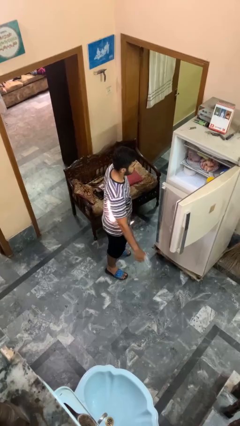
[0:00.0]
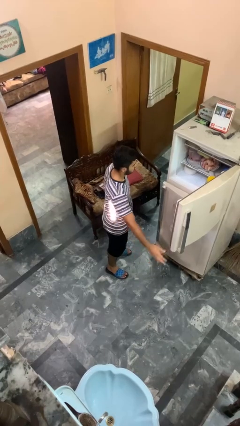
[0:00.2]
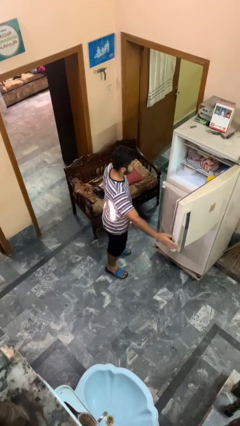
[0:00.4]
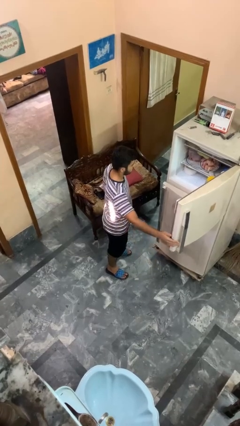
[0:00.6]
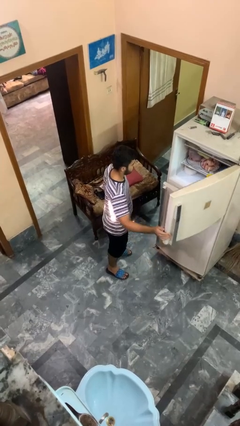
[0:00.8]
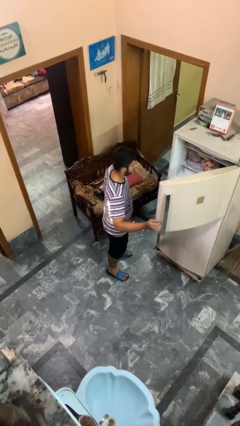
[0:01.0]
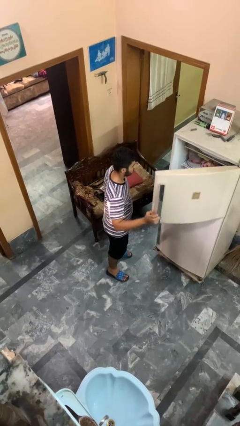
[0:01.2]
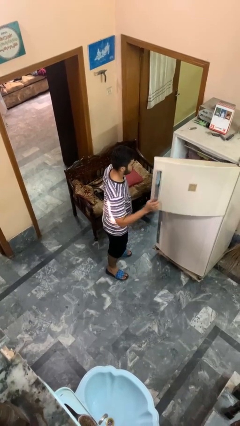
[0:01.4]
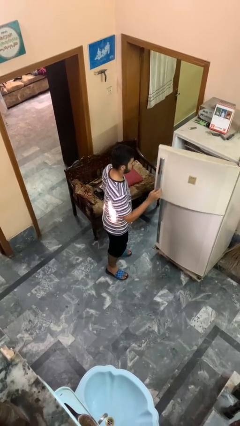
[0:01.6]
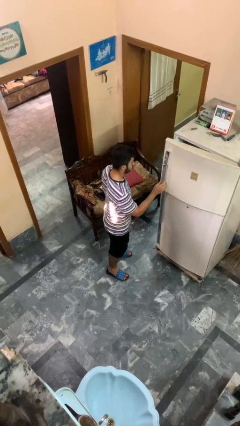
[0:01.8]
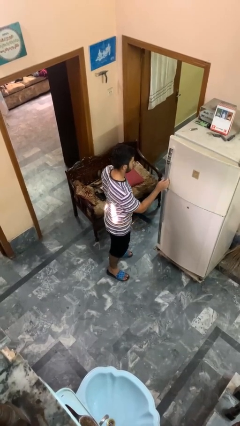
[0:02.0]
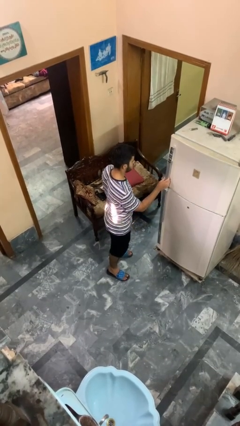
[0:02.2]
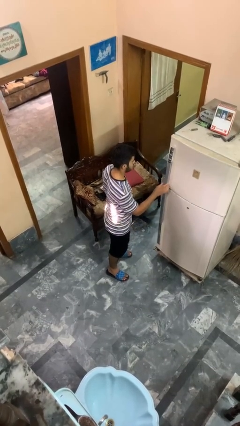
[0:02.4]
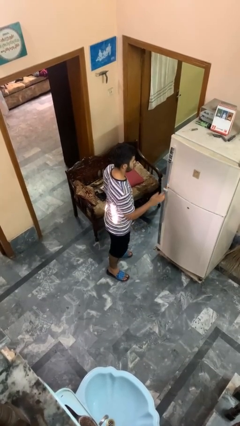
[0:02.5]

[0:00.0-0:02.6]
person closes refrigerator

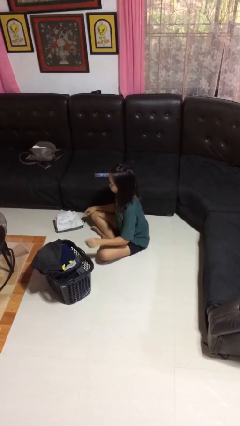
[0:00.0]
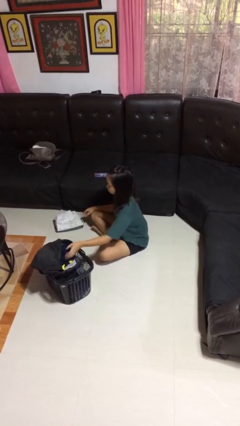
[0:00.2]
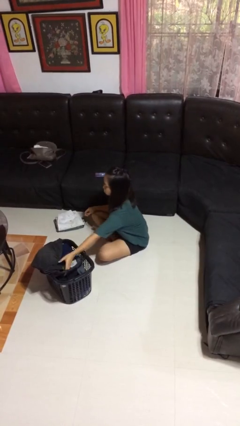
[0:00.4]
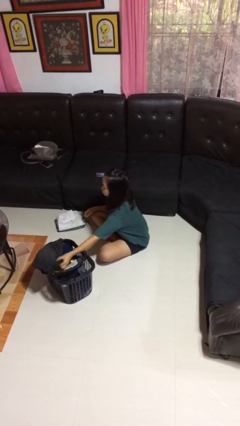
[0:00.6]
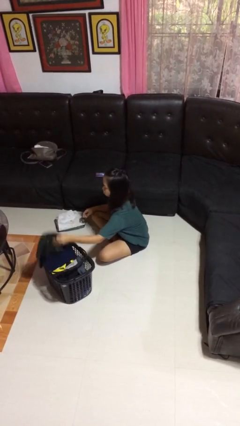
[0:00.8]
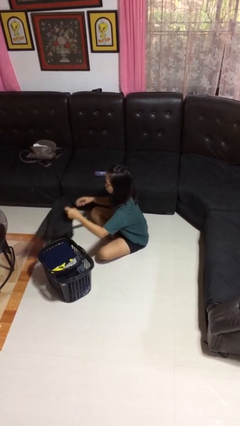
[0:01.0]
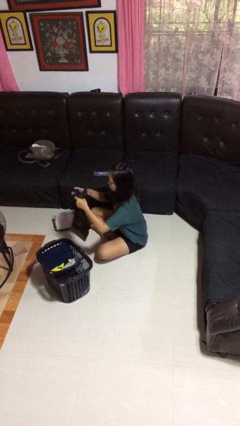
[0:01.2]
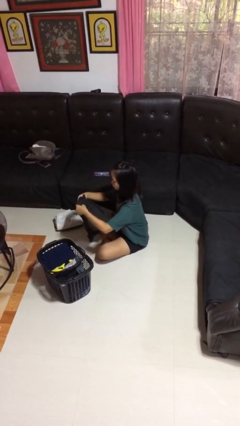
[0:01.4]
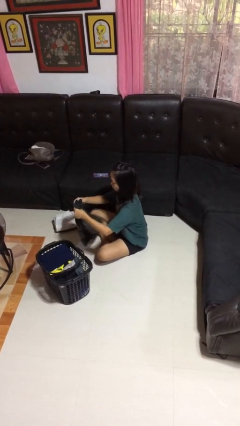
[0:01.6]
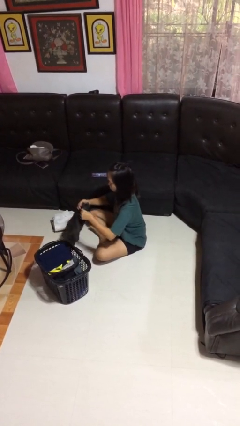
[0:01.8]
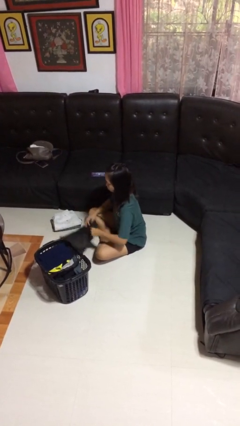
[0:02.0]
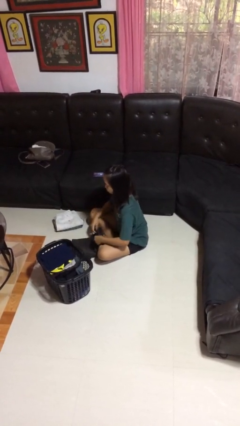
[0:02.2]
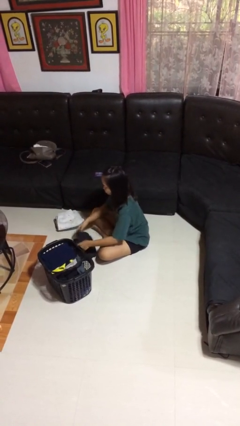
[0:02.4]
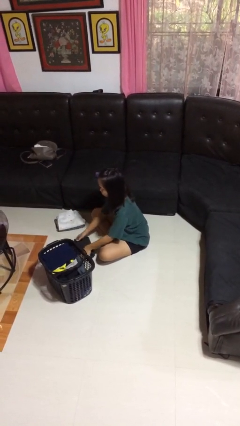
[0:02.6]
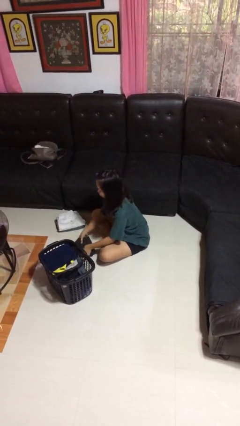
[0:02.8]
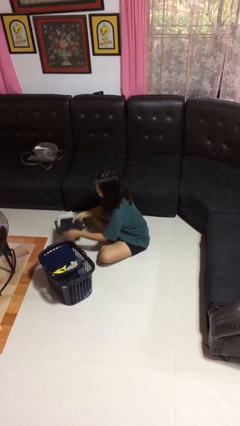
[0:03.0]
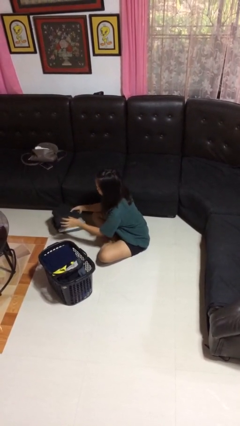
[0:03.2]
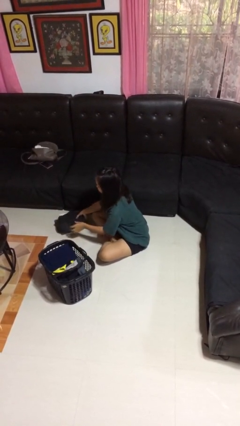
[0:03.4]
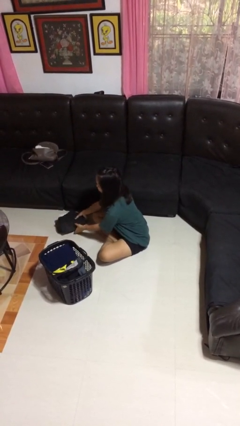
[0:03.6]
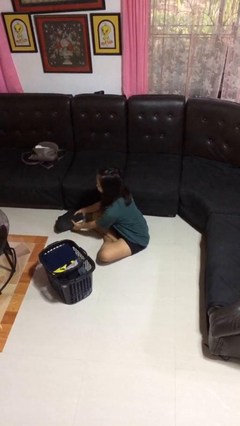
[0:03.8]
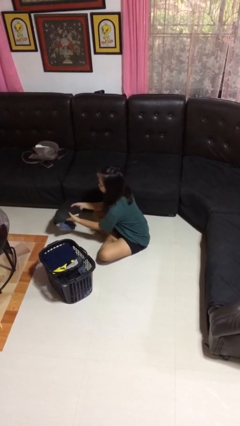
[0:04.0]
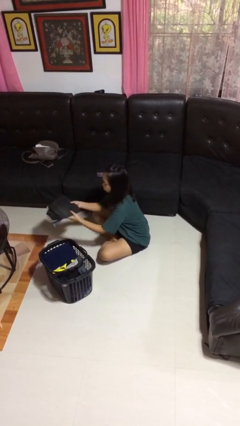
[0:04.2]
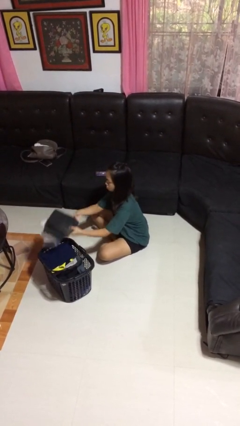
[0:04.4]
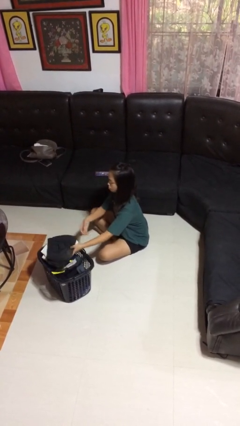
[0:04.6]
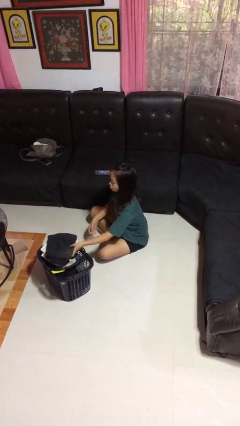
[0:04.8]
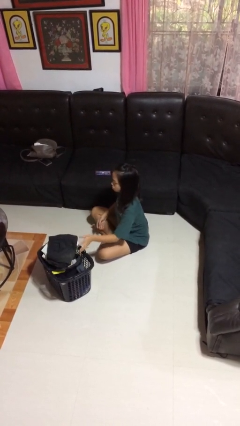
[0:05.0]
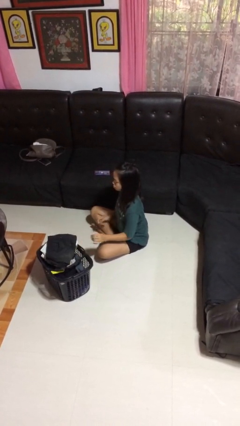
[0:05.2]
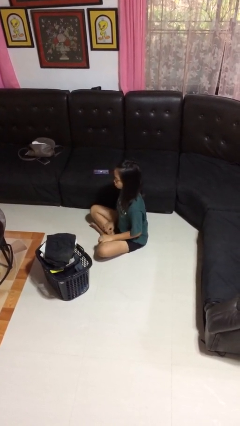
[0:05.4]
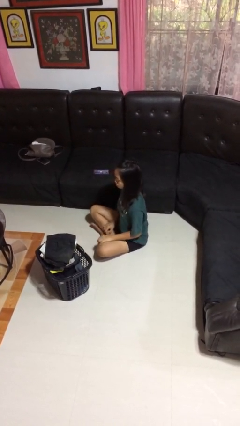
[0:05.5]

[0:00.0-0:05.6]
person folds pants

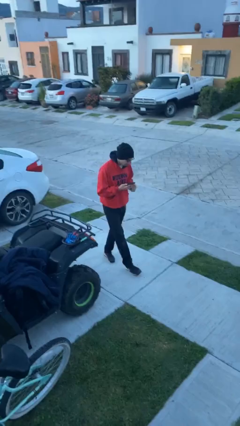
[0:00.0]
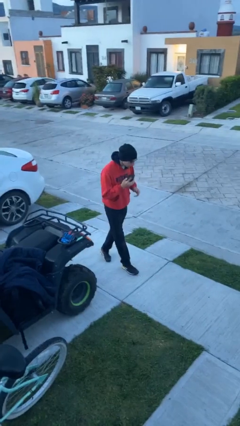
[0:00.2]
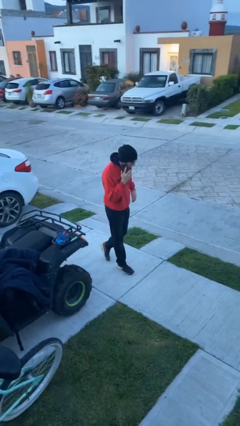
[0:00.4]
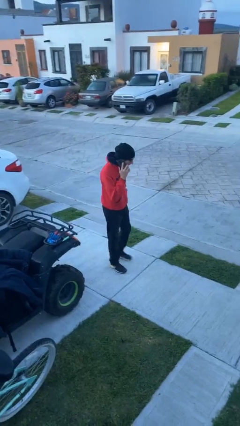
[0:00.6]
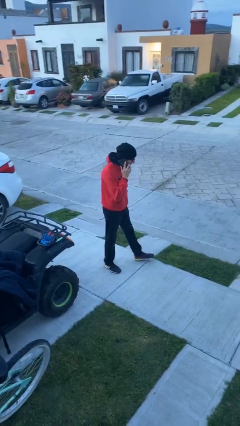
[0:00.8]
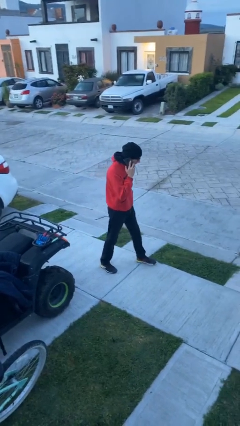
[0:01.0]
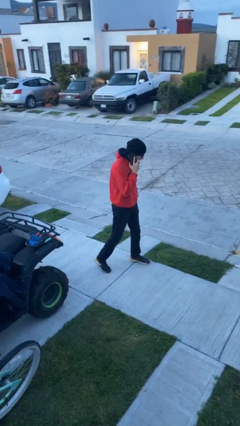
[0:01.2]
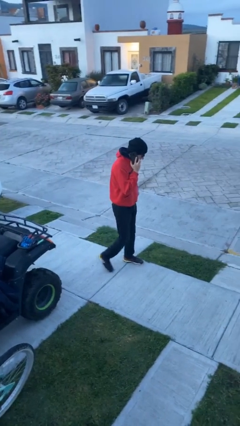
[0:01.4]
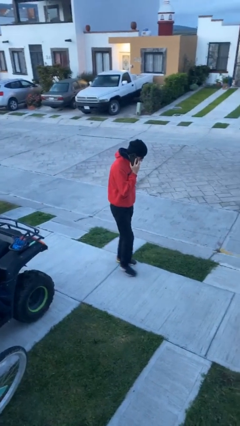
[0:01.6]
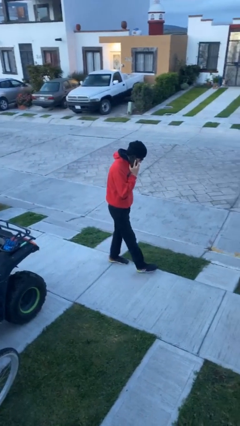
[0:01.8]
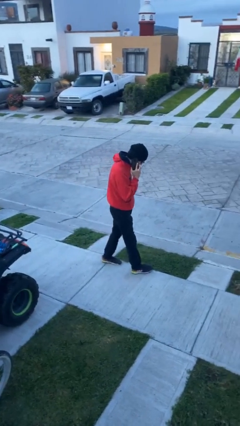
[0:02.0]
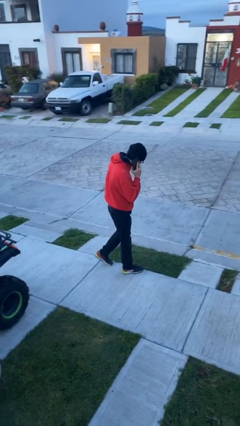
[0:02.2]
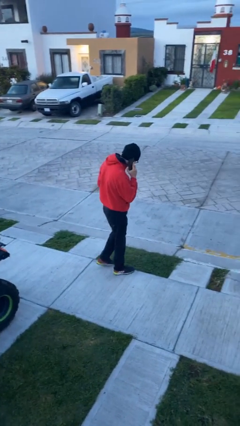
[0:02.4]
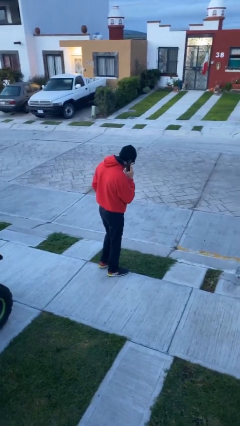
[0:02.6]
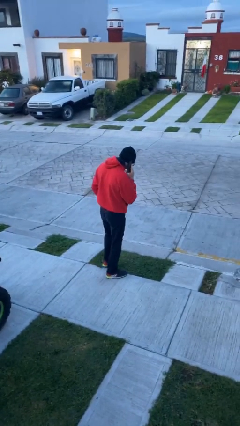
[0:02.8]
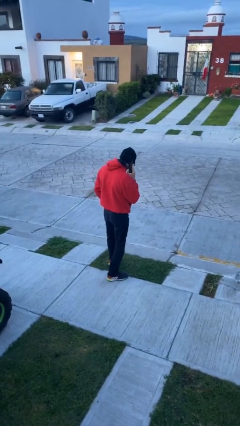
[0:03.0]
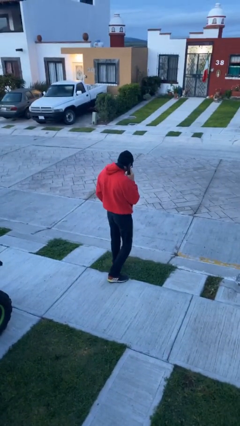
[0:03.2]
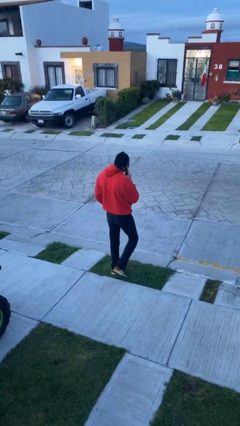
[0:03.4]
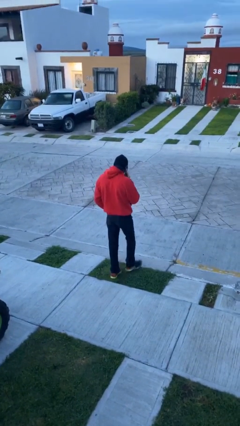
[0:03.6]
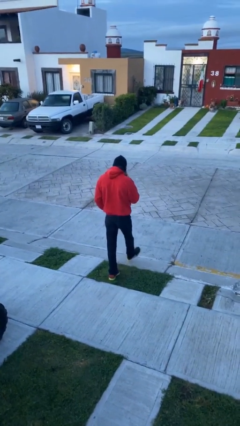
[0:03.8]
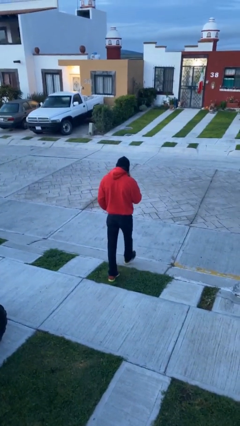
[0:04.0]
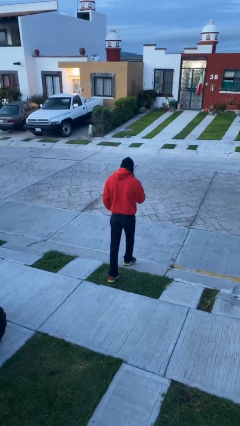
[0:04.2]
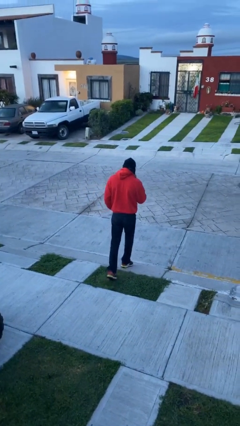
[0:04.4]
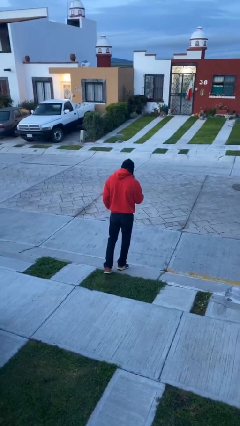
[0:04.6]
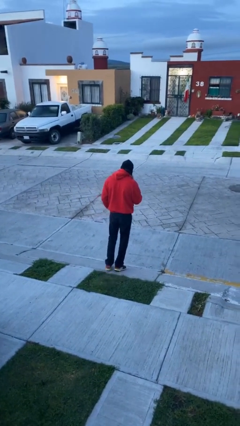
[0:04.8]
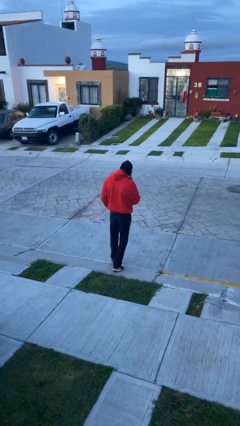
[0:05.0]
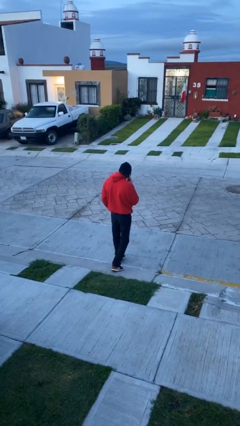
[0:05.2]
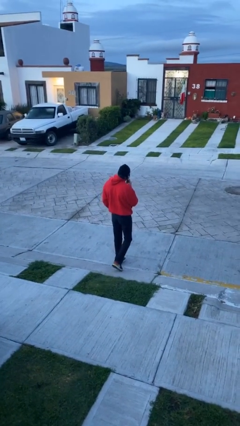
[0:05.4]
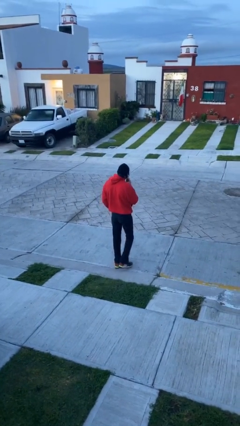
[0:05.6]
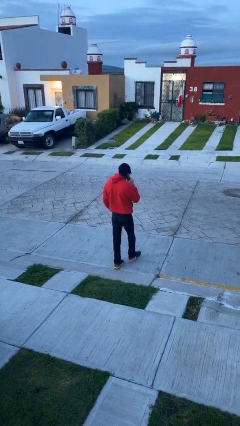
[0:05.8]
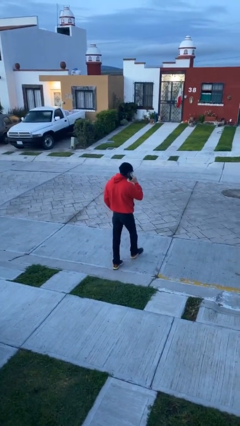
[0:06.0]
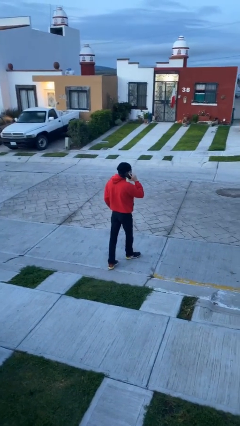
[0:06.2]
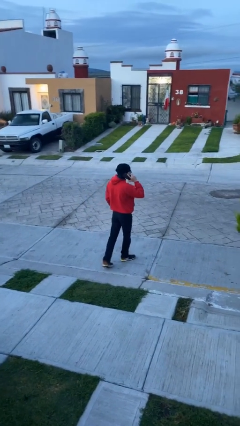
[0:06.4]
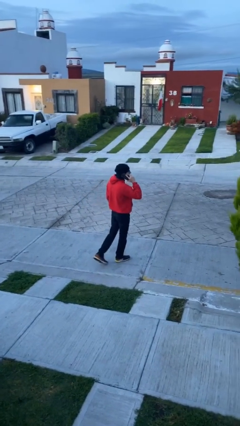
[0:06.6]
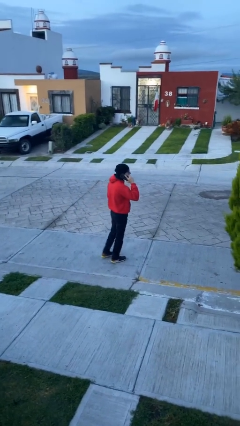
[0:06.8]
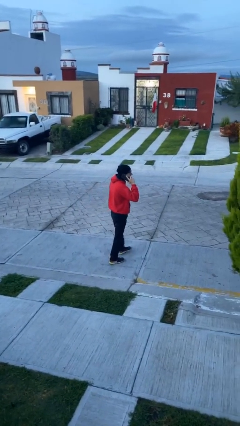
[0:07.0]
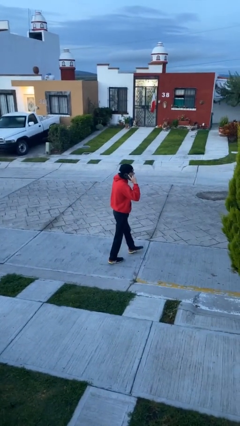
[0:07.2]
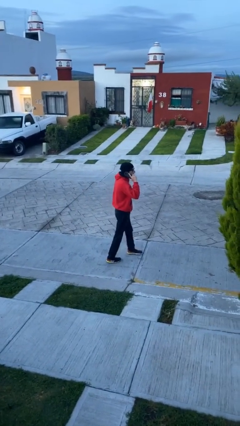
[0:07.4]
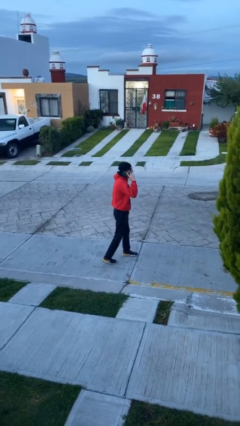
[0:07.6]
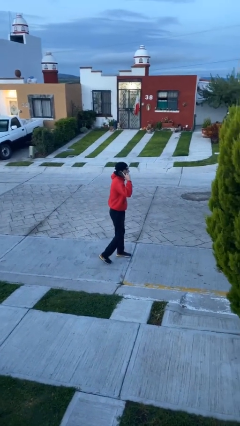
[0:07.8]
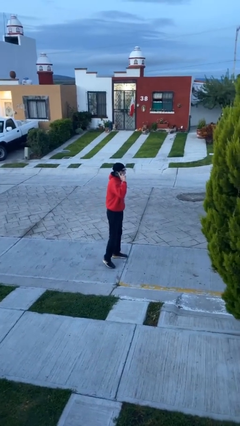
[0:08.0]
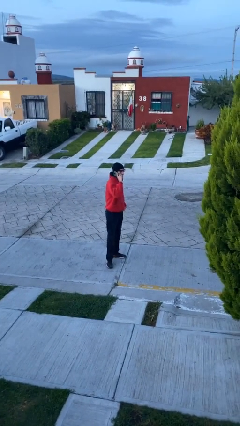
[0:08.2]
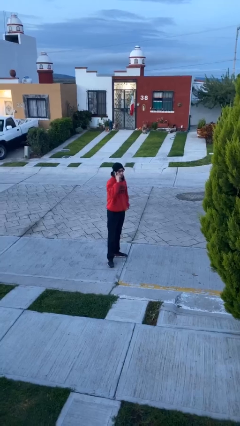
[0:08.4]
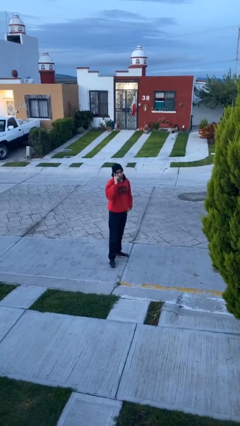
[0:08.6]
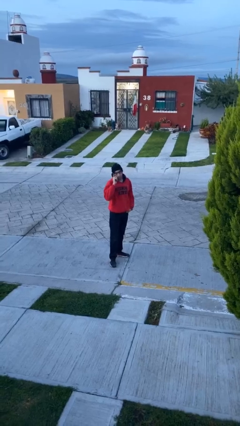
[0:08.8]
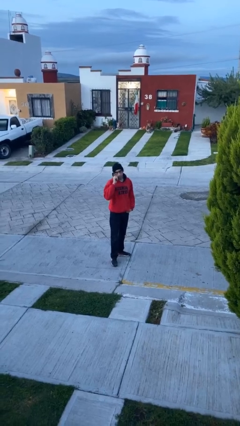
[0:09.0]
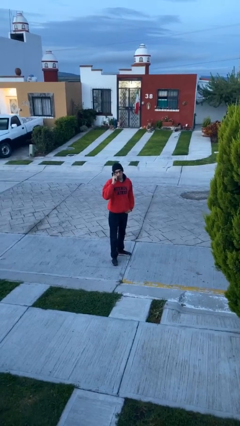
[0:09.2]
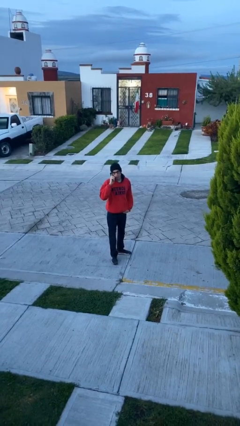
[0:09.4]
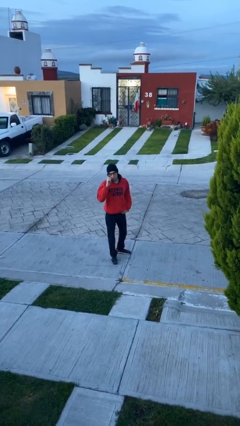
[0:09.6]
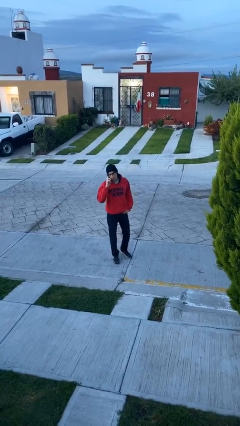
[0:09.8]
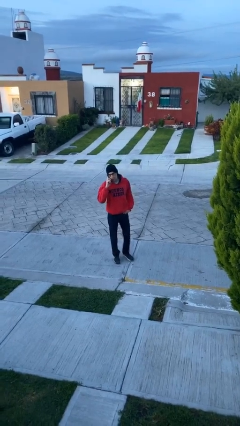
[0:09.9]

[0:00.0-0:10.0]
person talks on phone
